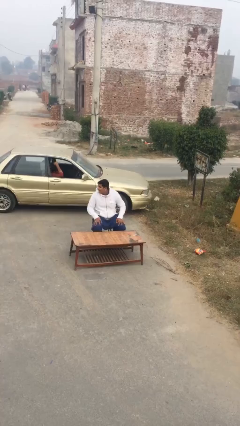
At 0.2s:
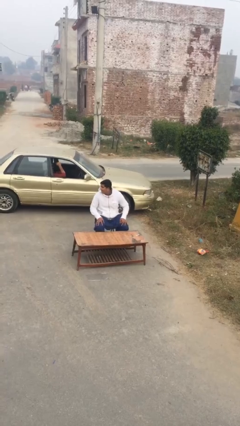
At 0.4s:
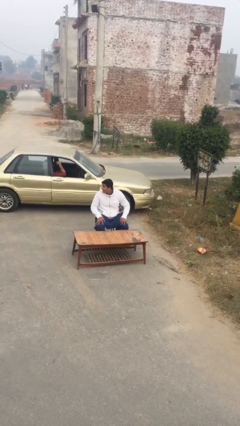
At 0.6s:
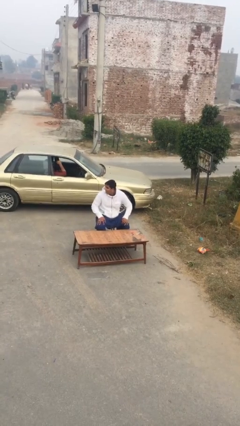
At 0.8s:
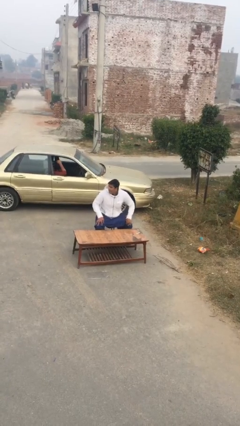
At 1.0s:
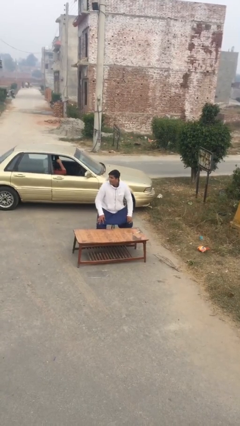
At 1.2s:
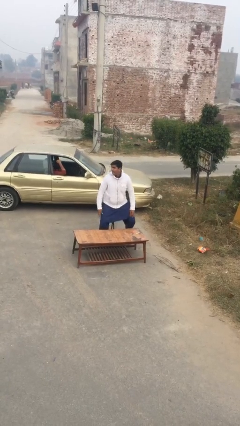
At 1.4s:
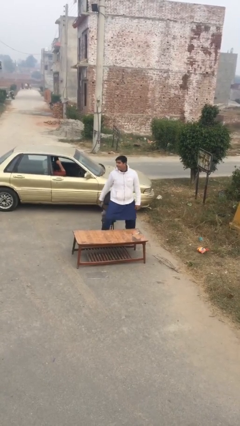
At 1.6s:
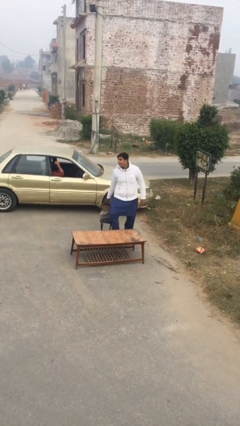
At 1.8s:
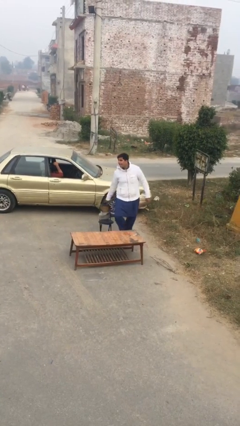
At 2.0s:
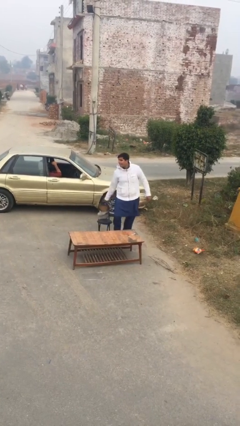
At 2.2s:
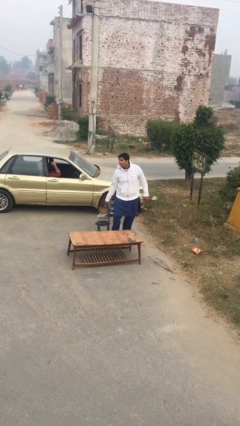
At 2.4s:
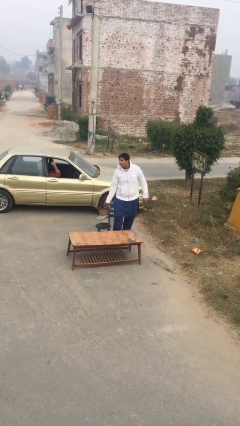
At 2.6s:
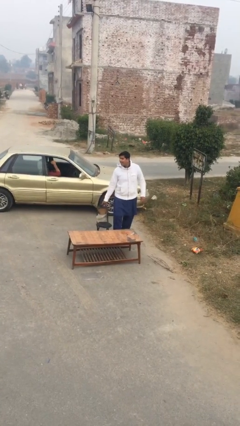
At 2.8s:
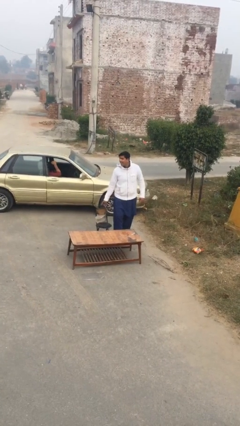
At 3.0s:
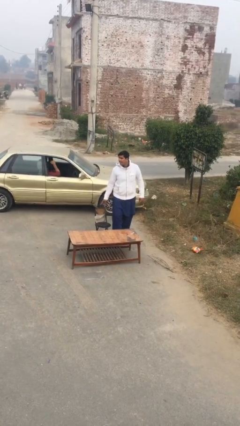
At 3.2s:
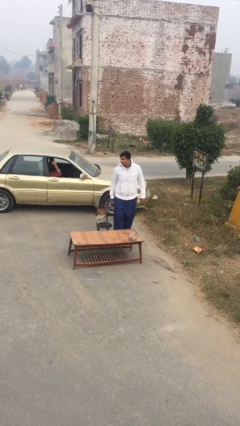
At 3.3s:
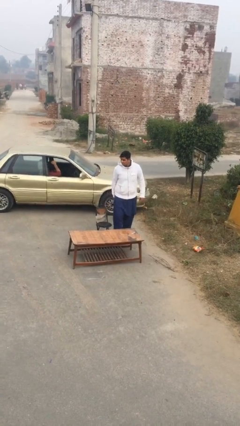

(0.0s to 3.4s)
person stands up

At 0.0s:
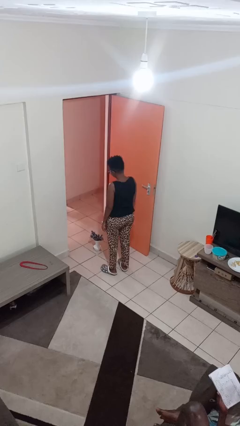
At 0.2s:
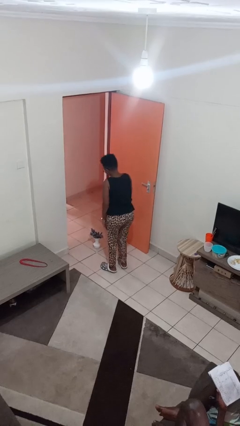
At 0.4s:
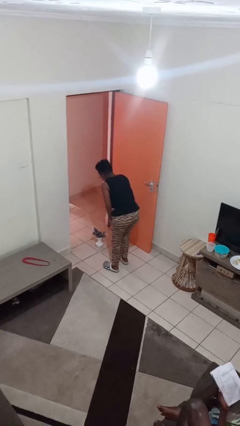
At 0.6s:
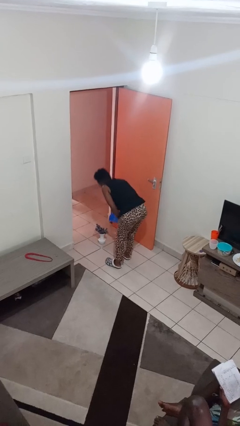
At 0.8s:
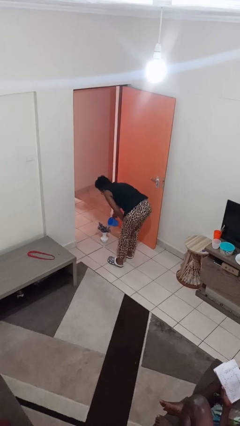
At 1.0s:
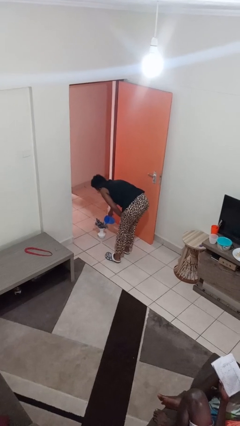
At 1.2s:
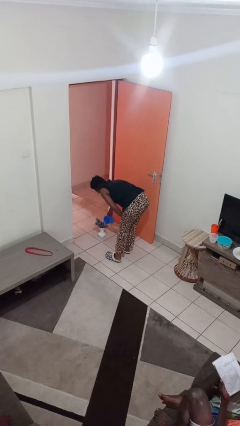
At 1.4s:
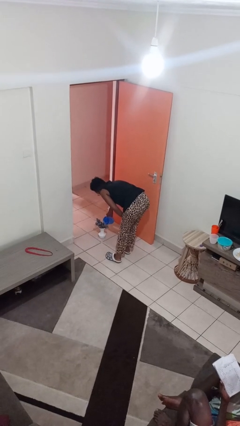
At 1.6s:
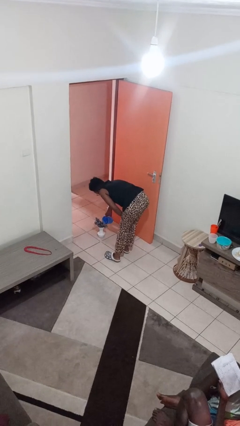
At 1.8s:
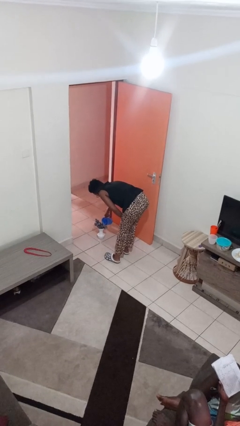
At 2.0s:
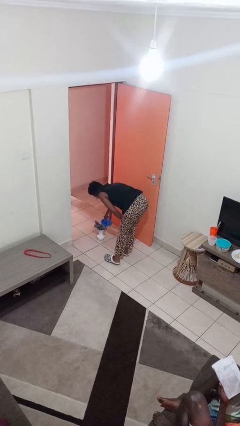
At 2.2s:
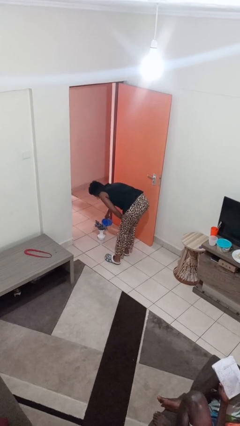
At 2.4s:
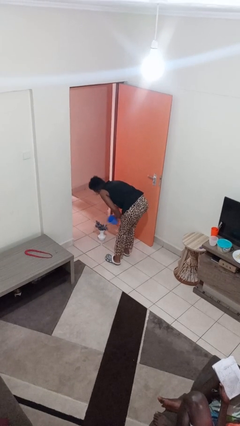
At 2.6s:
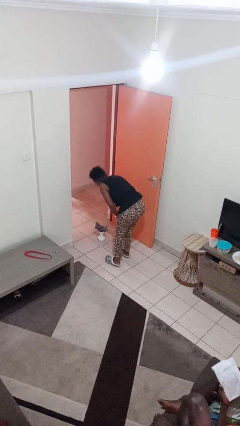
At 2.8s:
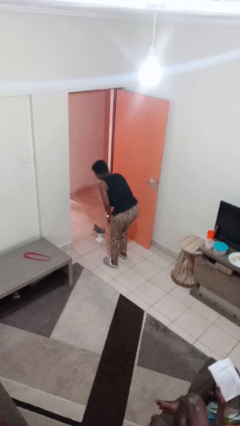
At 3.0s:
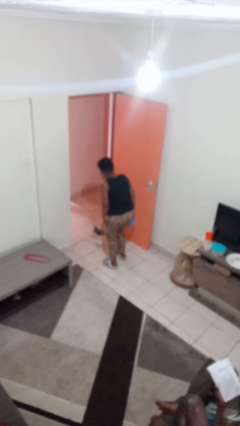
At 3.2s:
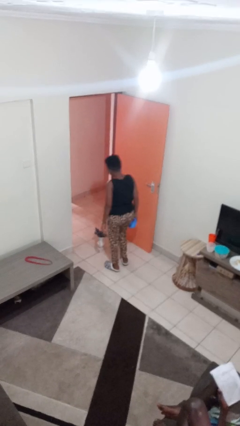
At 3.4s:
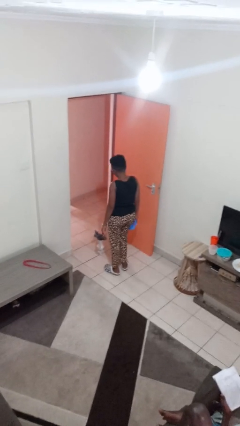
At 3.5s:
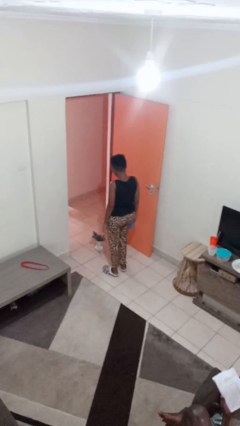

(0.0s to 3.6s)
person waters houseplant

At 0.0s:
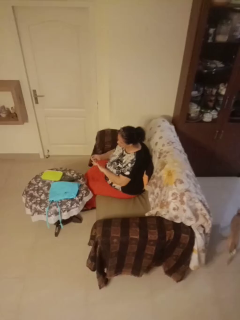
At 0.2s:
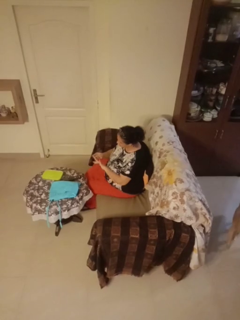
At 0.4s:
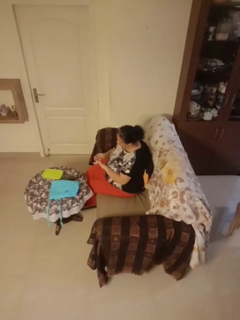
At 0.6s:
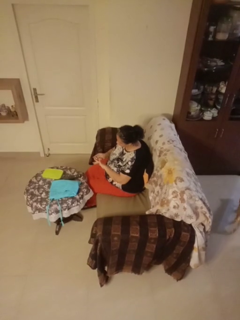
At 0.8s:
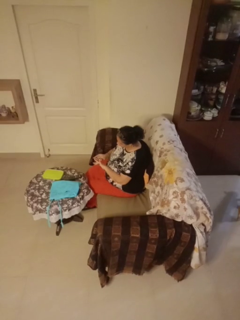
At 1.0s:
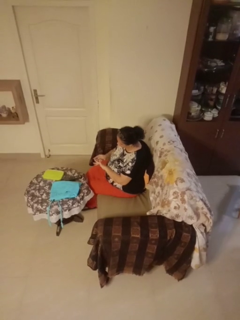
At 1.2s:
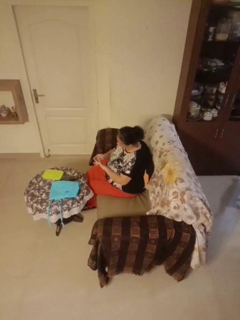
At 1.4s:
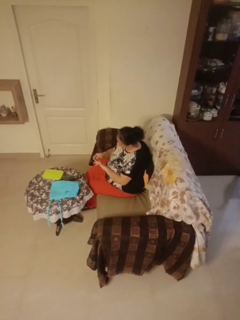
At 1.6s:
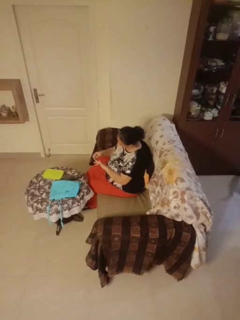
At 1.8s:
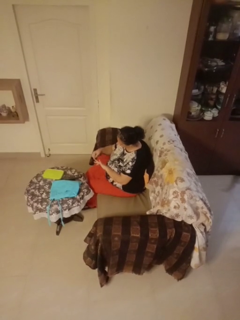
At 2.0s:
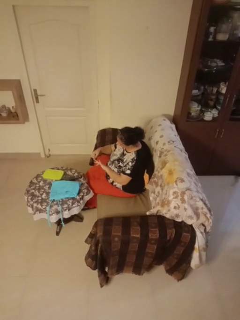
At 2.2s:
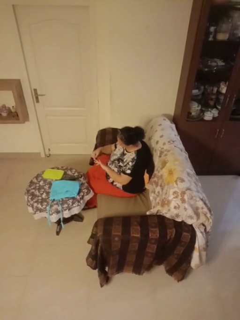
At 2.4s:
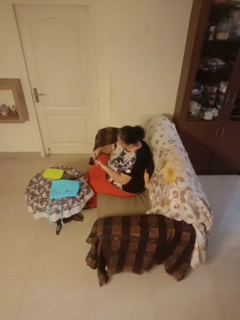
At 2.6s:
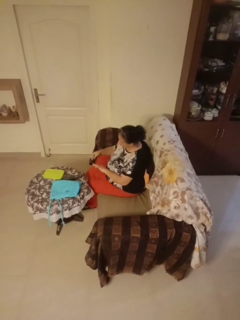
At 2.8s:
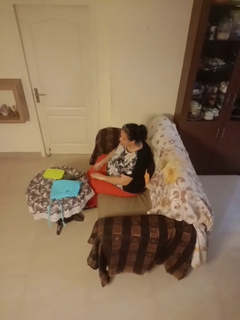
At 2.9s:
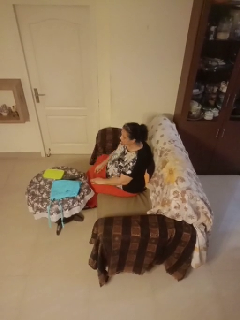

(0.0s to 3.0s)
person files fingernails

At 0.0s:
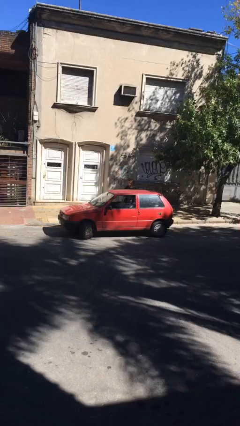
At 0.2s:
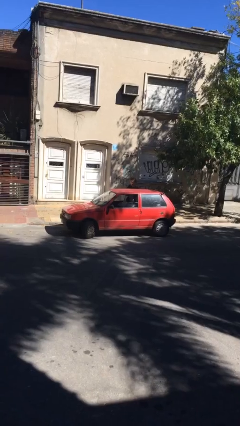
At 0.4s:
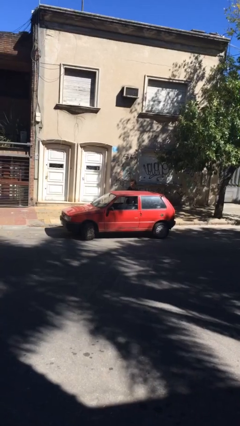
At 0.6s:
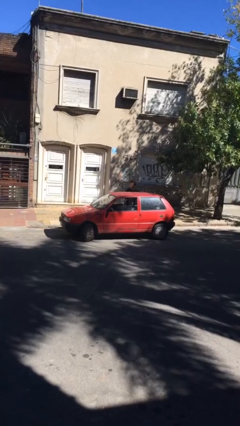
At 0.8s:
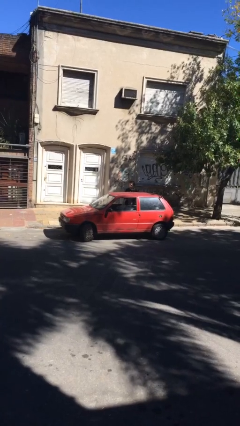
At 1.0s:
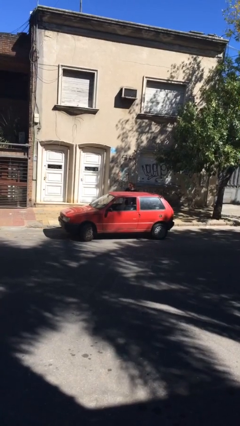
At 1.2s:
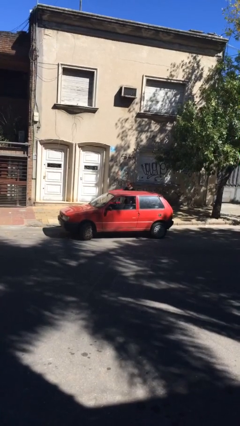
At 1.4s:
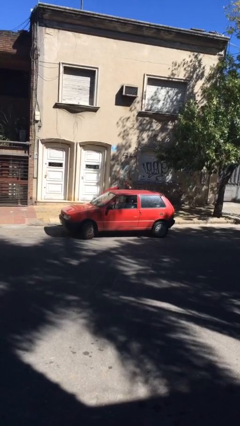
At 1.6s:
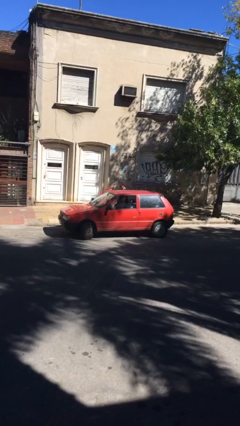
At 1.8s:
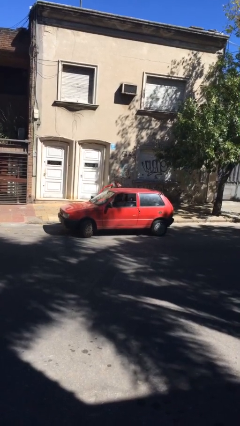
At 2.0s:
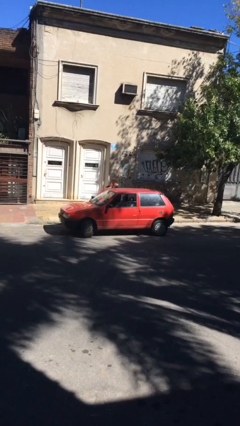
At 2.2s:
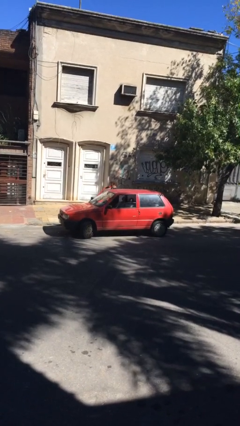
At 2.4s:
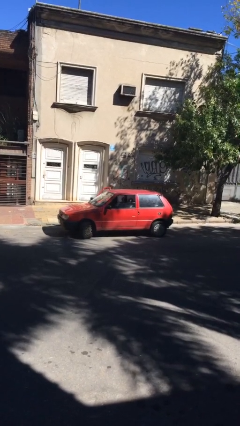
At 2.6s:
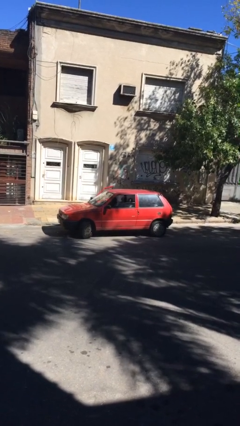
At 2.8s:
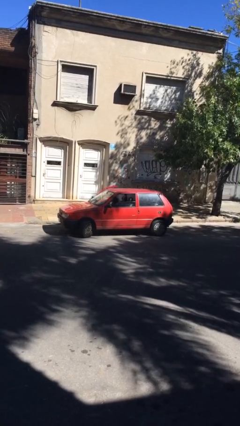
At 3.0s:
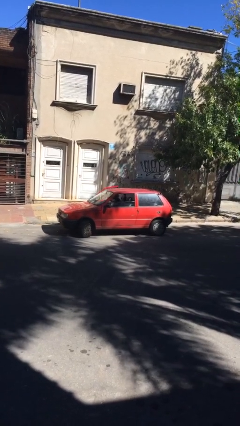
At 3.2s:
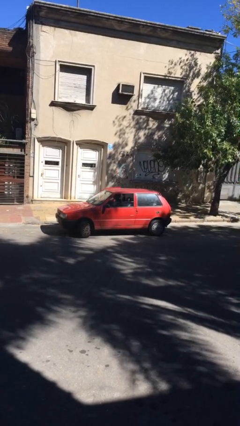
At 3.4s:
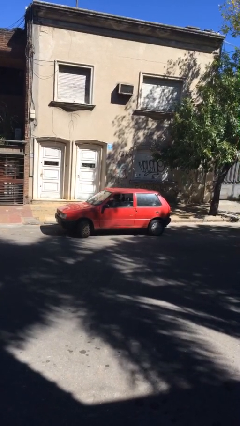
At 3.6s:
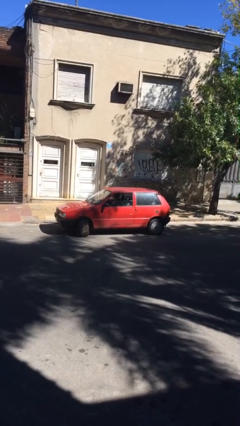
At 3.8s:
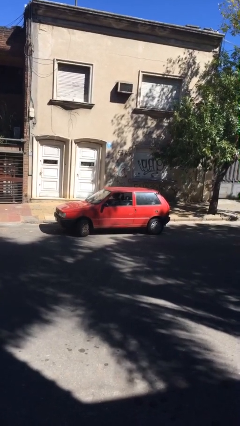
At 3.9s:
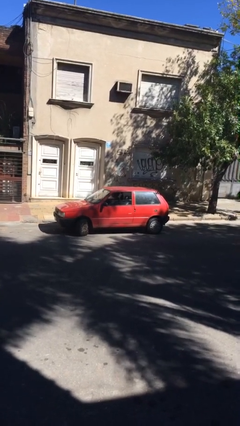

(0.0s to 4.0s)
car picks up person

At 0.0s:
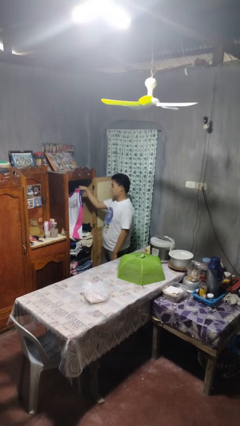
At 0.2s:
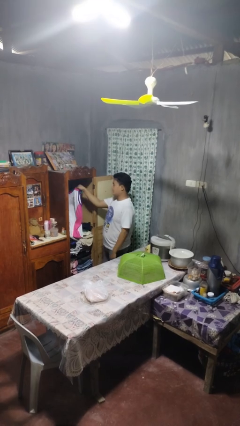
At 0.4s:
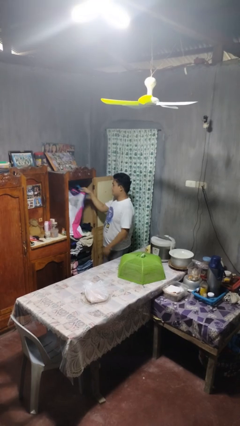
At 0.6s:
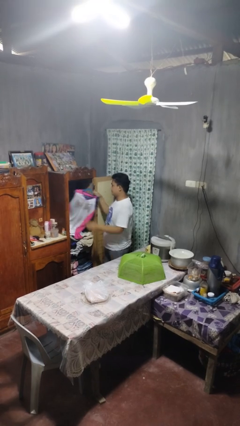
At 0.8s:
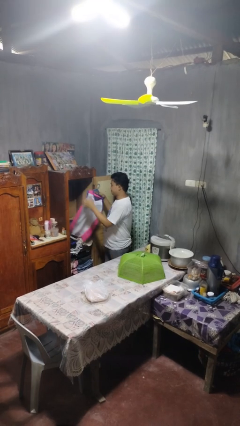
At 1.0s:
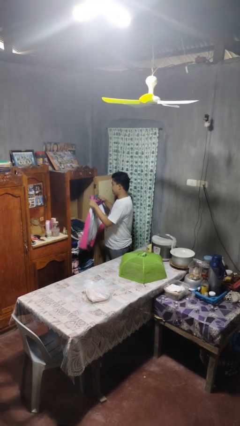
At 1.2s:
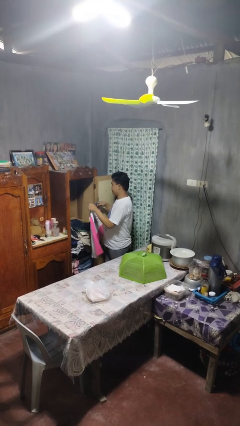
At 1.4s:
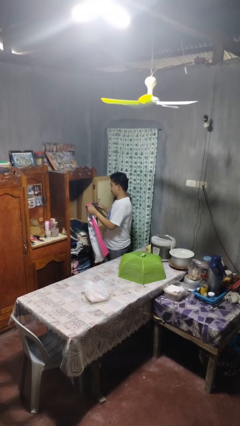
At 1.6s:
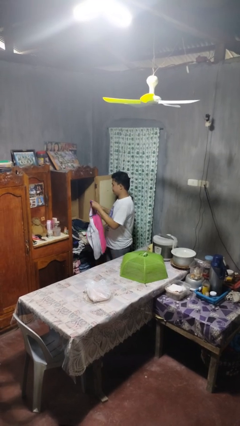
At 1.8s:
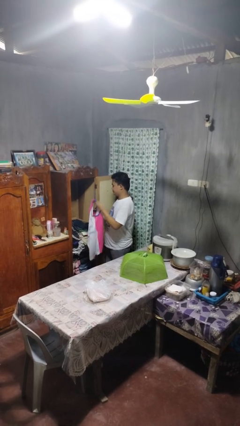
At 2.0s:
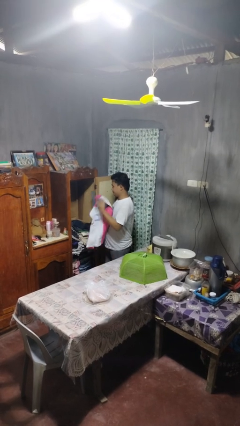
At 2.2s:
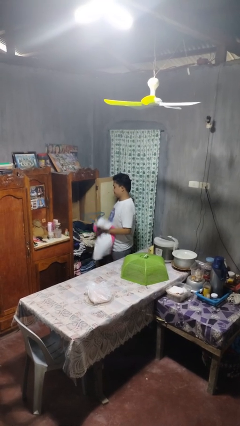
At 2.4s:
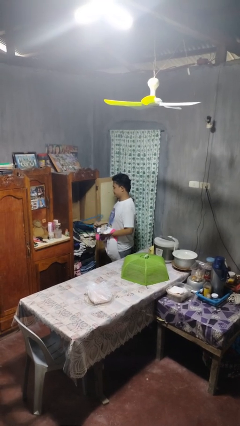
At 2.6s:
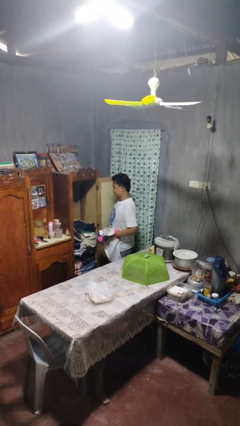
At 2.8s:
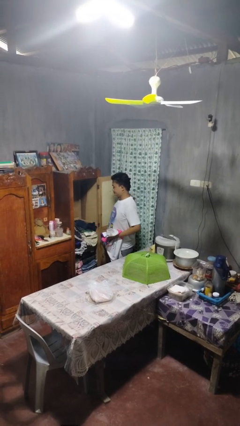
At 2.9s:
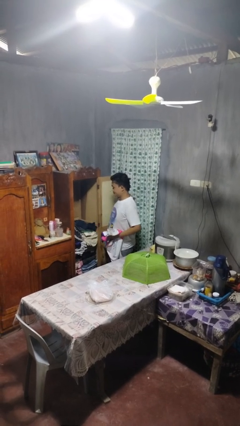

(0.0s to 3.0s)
person takes clothes from closet

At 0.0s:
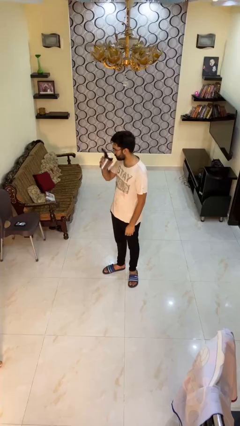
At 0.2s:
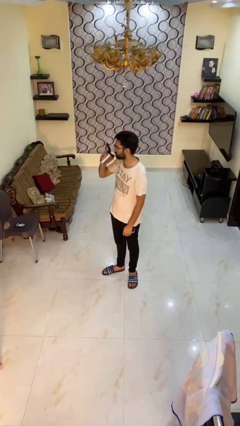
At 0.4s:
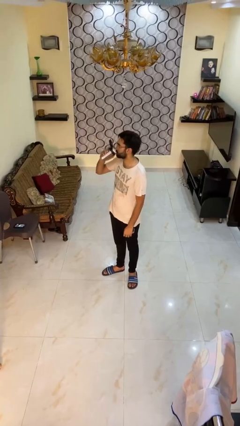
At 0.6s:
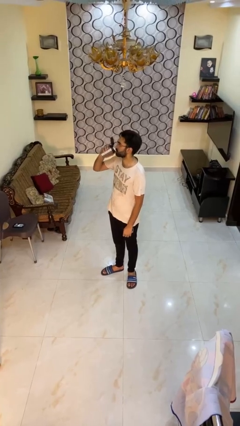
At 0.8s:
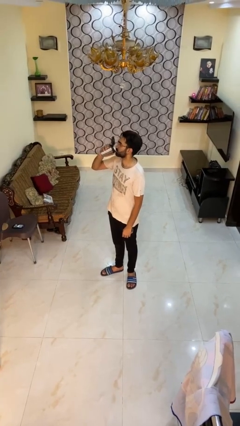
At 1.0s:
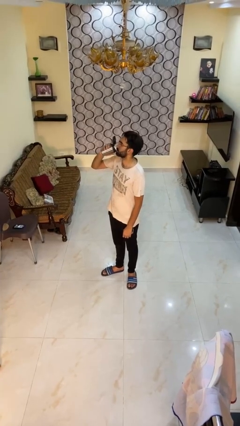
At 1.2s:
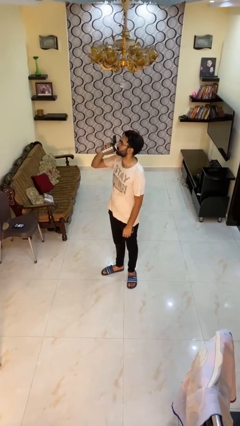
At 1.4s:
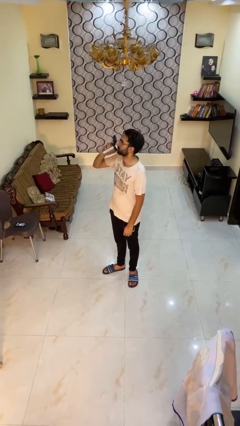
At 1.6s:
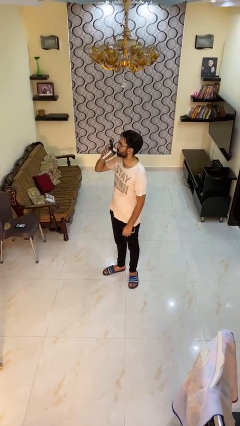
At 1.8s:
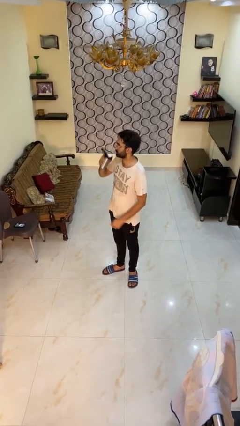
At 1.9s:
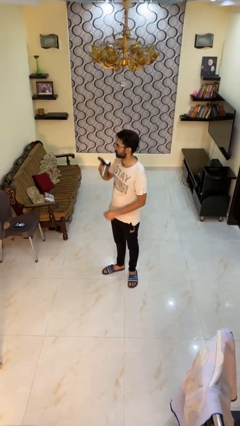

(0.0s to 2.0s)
person drinks from beverage can
